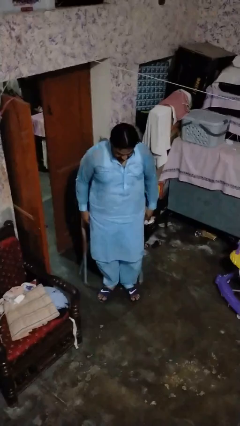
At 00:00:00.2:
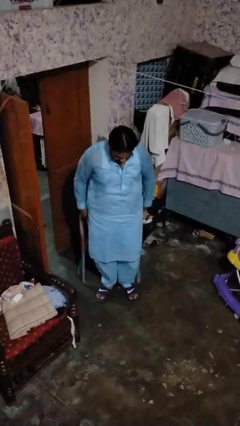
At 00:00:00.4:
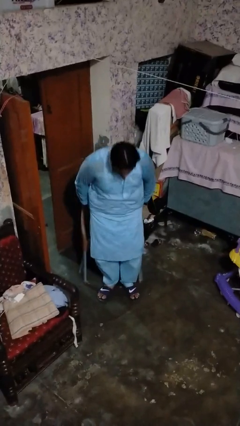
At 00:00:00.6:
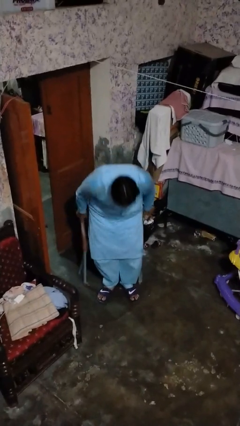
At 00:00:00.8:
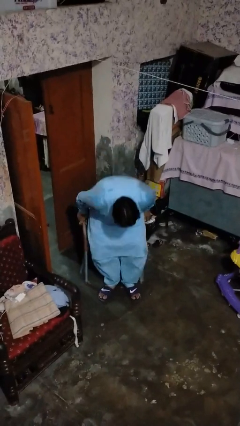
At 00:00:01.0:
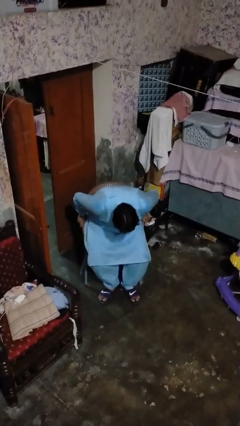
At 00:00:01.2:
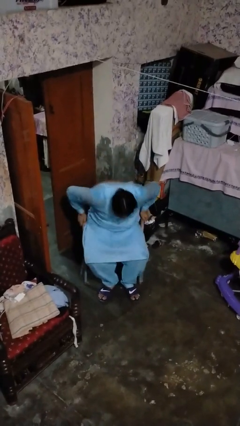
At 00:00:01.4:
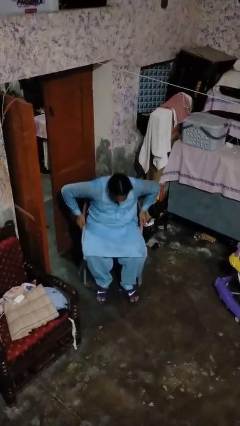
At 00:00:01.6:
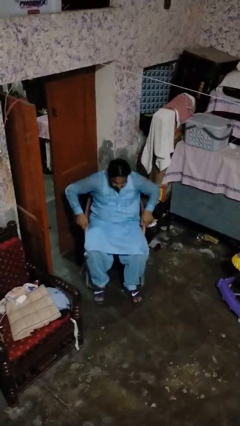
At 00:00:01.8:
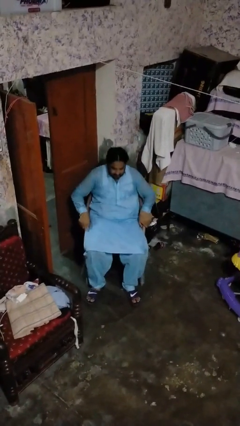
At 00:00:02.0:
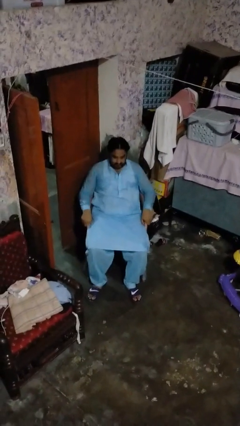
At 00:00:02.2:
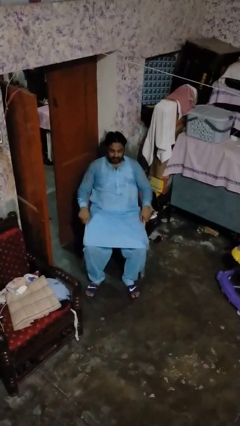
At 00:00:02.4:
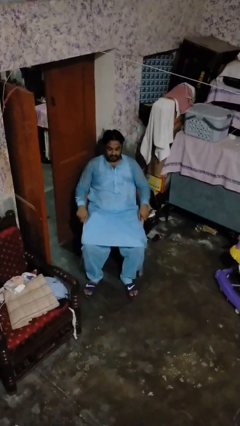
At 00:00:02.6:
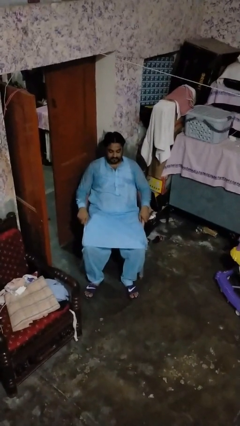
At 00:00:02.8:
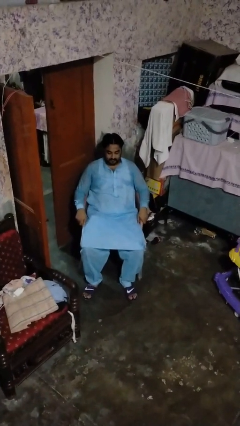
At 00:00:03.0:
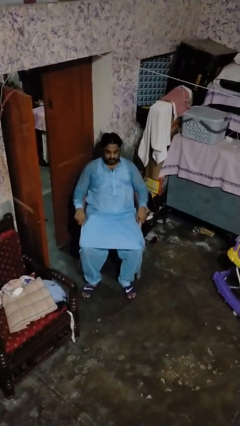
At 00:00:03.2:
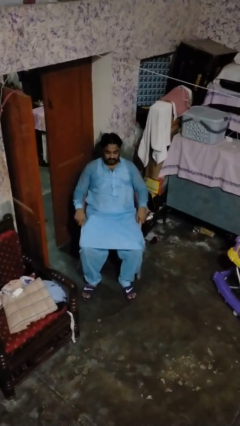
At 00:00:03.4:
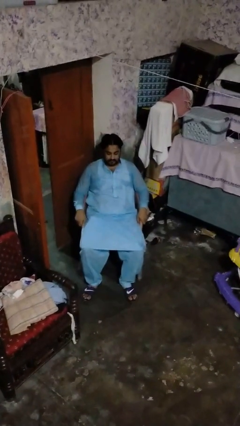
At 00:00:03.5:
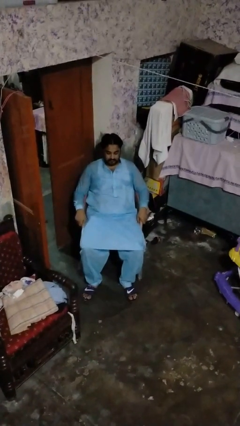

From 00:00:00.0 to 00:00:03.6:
person sits down

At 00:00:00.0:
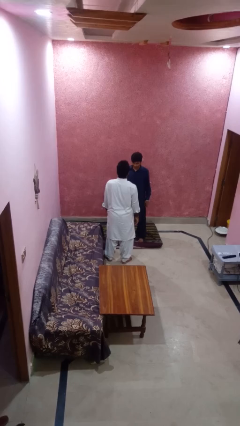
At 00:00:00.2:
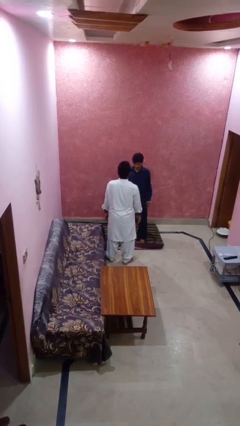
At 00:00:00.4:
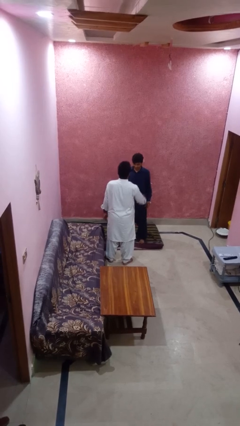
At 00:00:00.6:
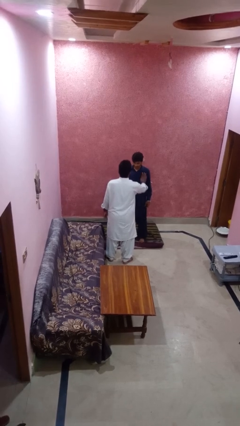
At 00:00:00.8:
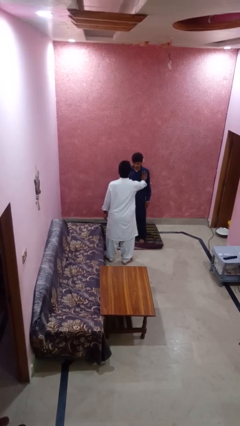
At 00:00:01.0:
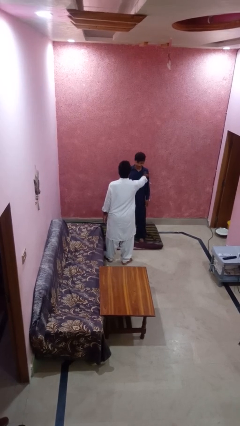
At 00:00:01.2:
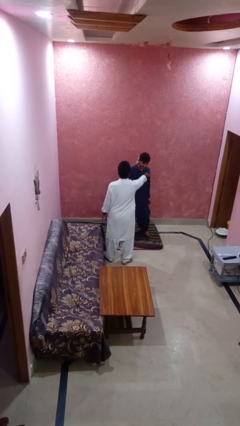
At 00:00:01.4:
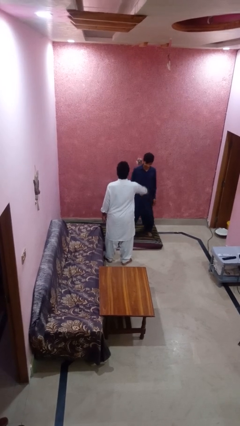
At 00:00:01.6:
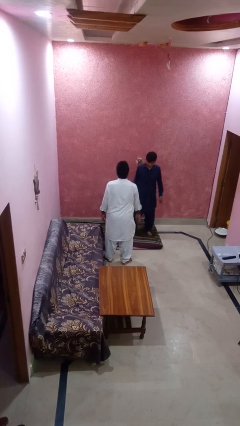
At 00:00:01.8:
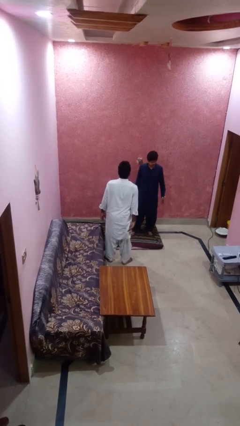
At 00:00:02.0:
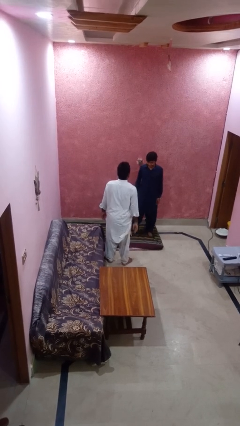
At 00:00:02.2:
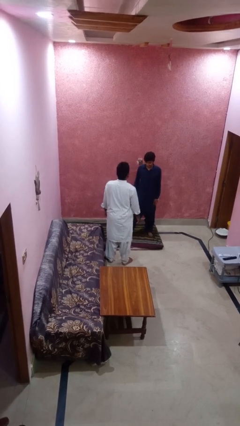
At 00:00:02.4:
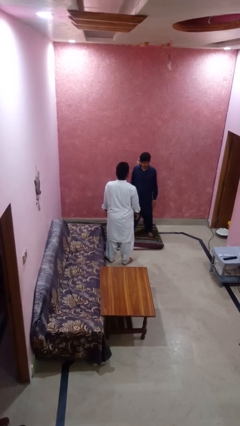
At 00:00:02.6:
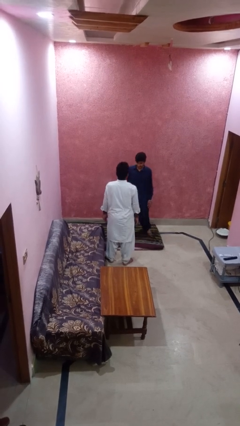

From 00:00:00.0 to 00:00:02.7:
person shoves person

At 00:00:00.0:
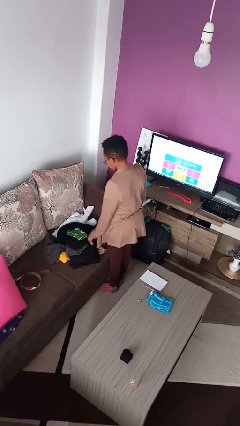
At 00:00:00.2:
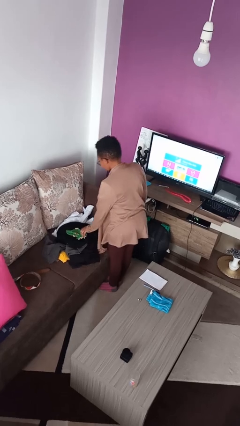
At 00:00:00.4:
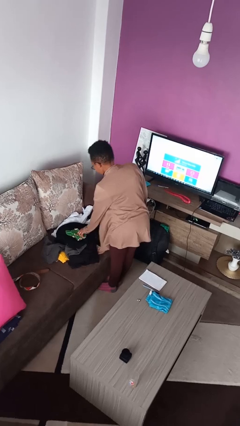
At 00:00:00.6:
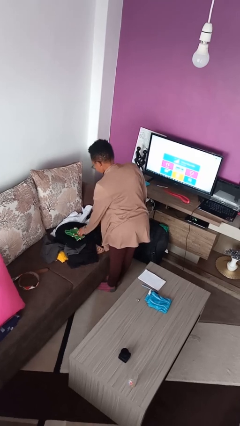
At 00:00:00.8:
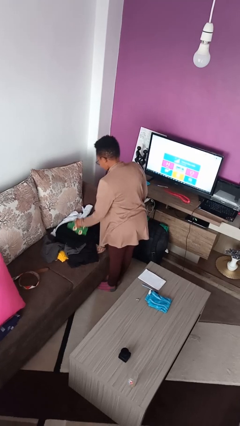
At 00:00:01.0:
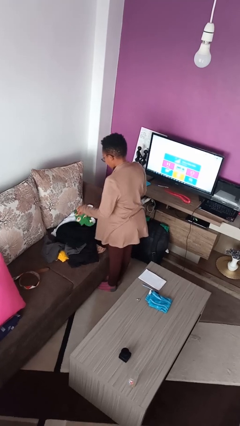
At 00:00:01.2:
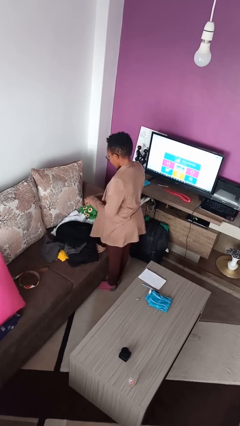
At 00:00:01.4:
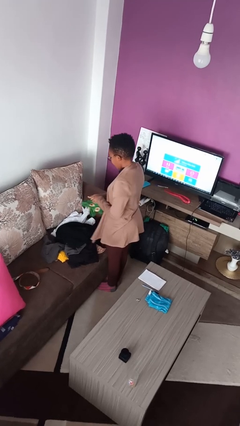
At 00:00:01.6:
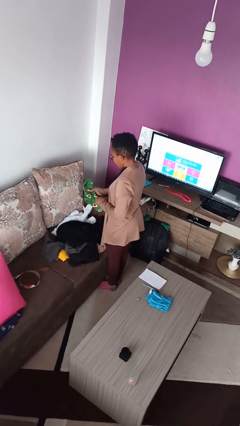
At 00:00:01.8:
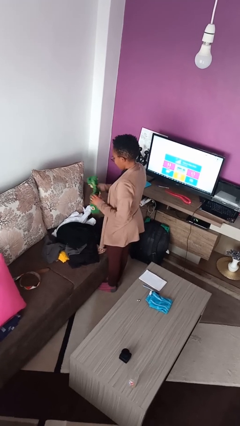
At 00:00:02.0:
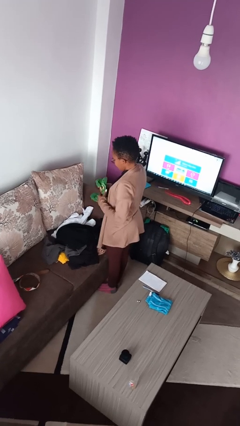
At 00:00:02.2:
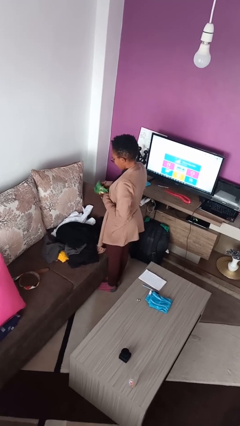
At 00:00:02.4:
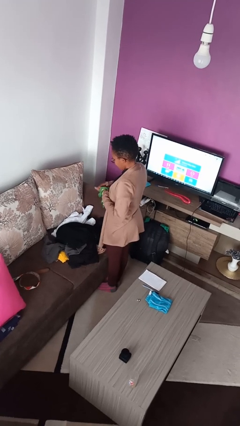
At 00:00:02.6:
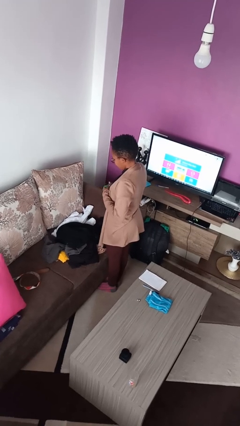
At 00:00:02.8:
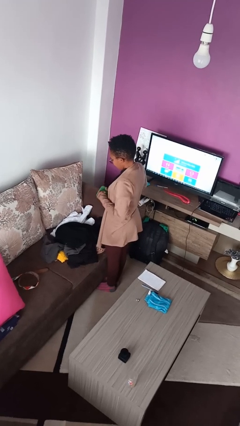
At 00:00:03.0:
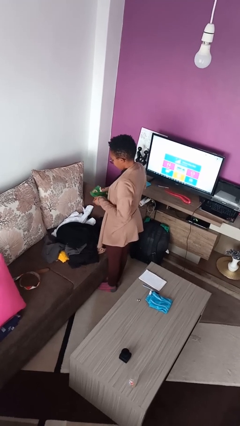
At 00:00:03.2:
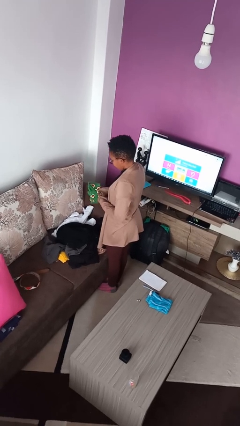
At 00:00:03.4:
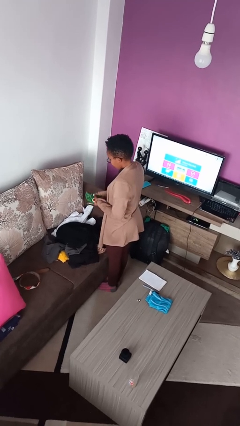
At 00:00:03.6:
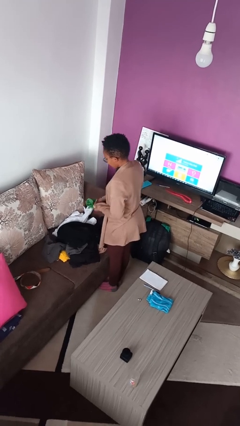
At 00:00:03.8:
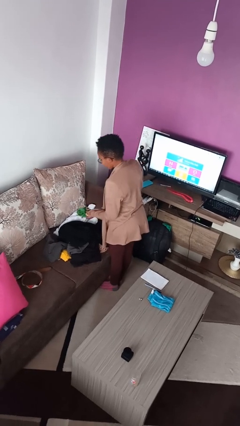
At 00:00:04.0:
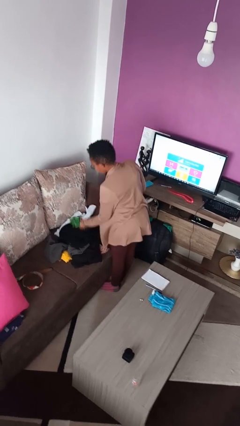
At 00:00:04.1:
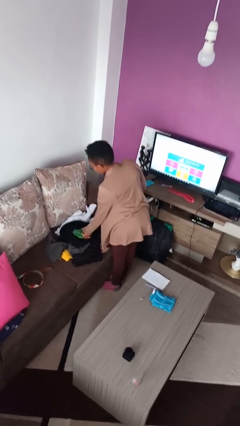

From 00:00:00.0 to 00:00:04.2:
person folds socks

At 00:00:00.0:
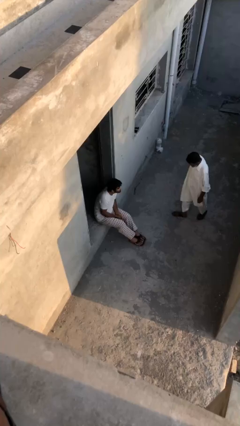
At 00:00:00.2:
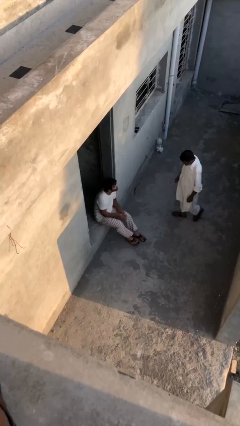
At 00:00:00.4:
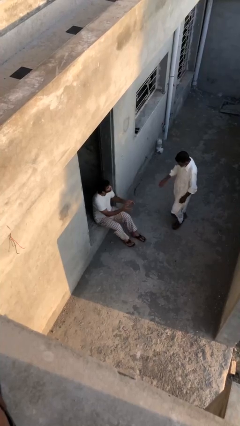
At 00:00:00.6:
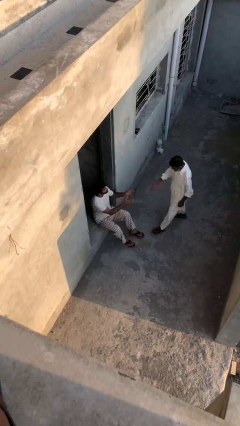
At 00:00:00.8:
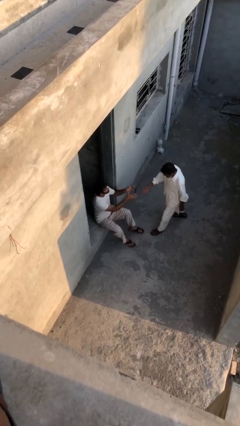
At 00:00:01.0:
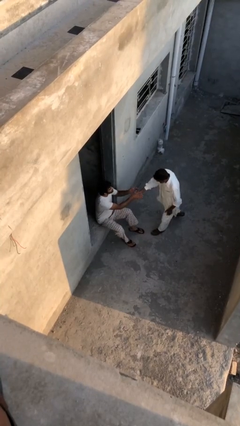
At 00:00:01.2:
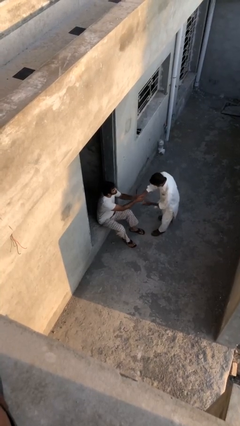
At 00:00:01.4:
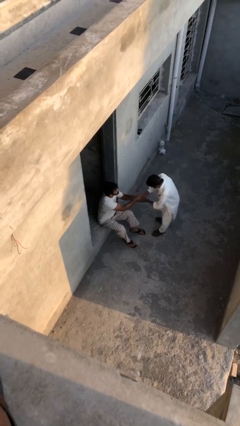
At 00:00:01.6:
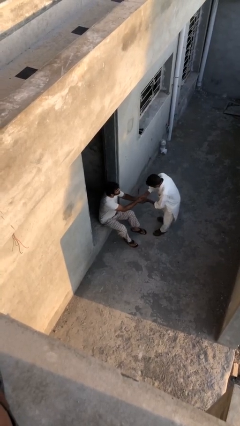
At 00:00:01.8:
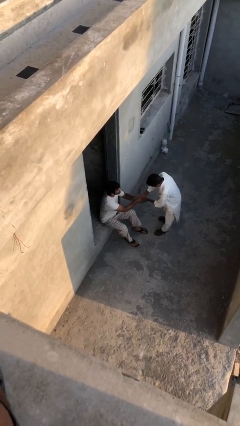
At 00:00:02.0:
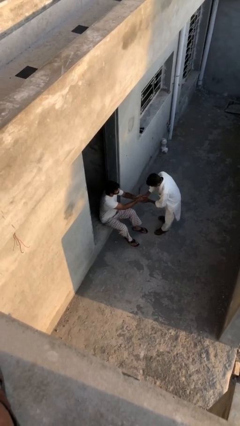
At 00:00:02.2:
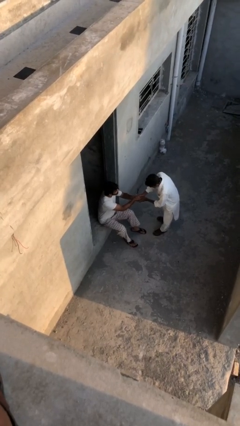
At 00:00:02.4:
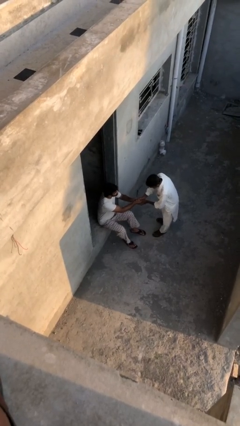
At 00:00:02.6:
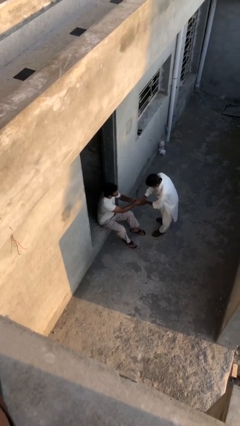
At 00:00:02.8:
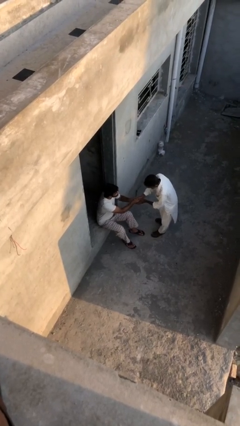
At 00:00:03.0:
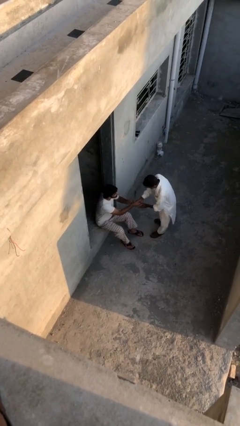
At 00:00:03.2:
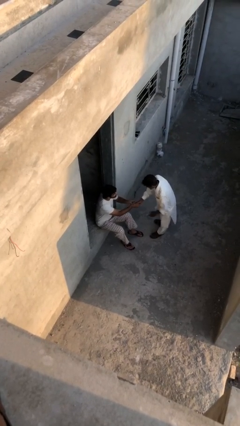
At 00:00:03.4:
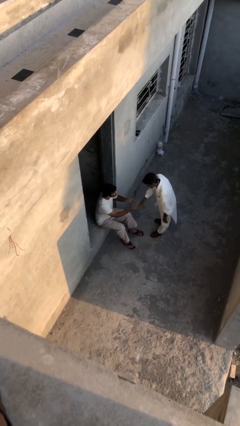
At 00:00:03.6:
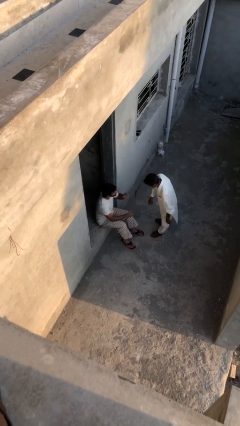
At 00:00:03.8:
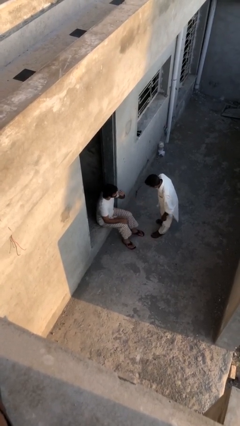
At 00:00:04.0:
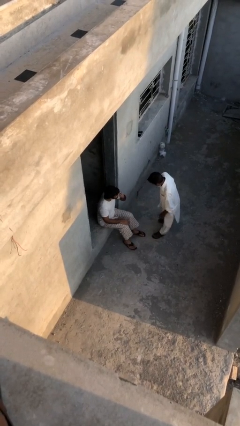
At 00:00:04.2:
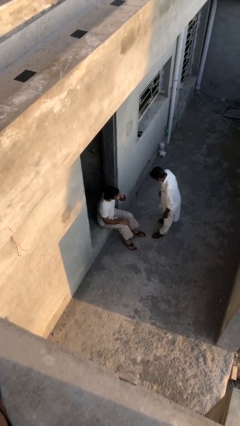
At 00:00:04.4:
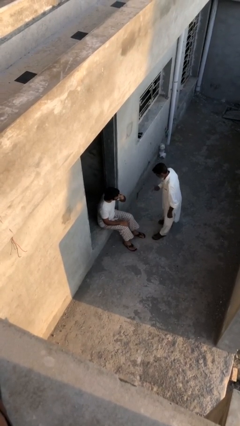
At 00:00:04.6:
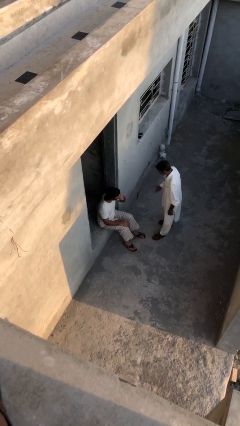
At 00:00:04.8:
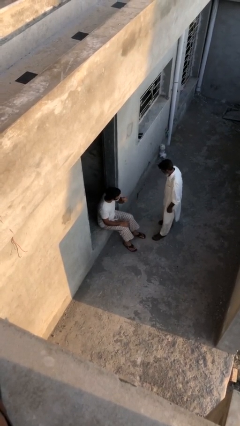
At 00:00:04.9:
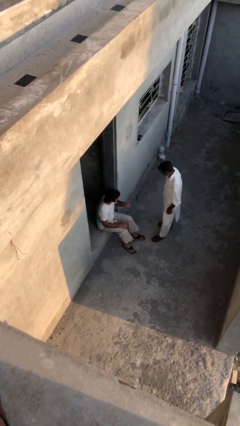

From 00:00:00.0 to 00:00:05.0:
person shakes hand

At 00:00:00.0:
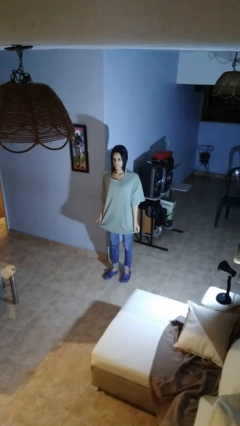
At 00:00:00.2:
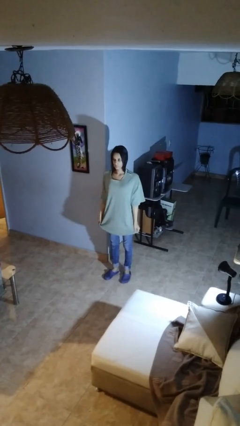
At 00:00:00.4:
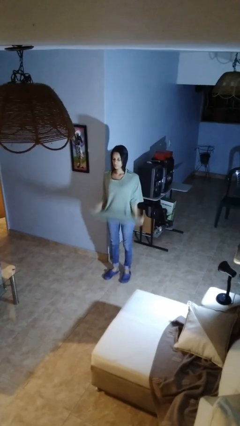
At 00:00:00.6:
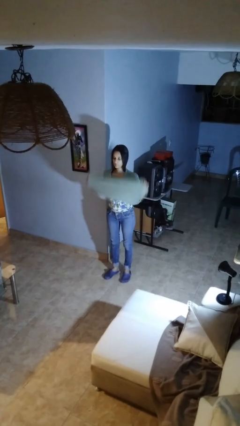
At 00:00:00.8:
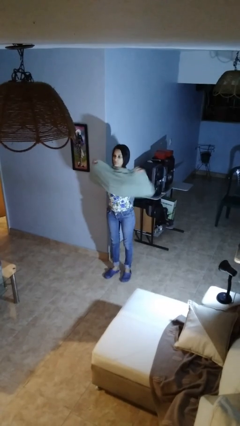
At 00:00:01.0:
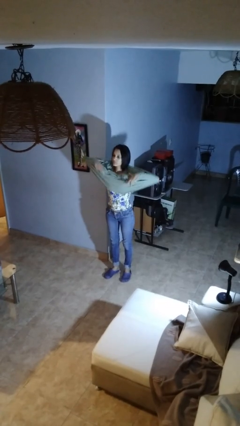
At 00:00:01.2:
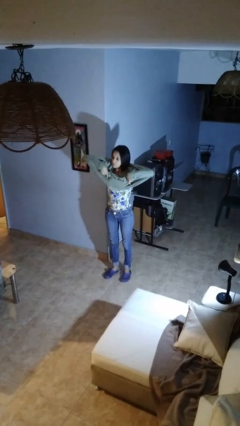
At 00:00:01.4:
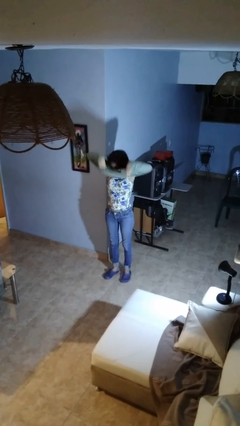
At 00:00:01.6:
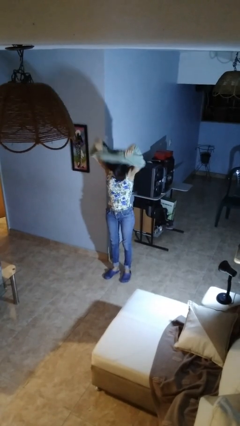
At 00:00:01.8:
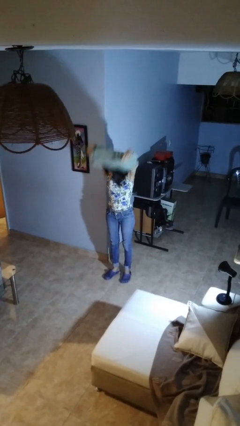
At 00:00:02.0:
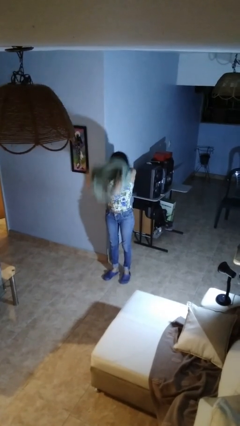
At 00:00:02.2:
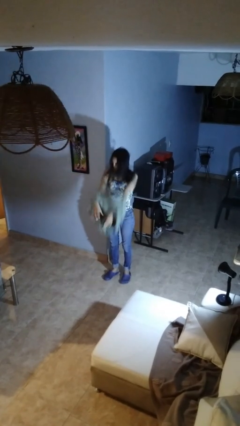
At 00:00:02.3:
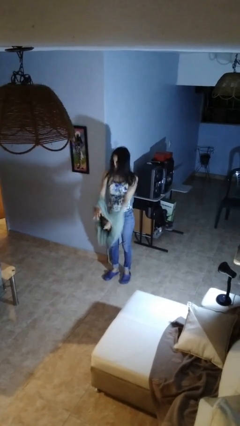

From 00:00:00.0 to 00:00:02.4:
person takes off shirt
